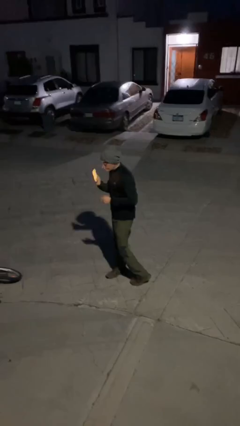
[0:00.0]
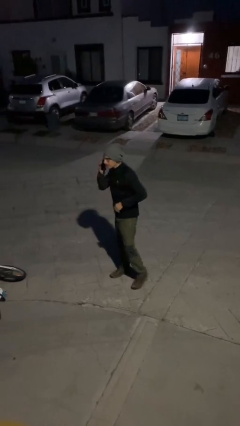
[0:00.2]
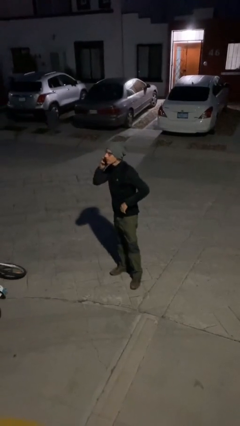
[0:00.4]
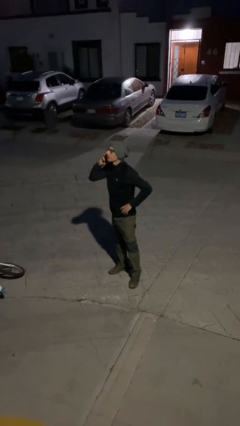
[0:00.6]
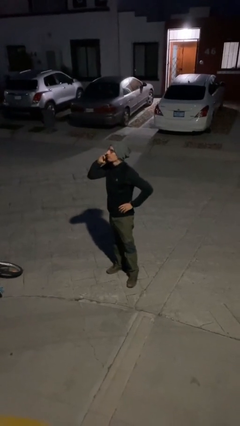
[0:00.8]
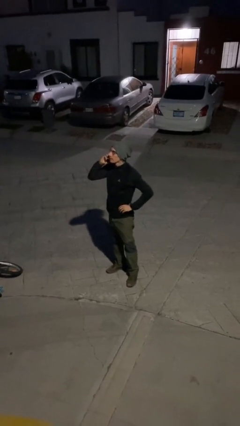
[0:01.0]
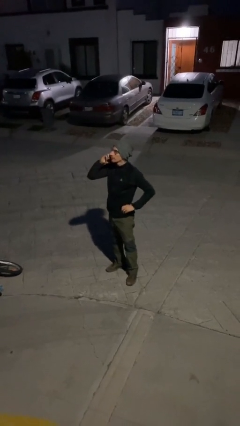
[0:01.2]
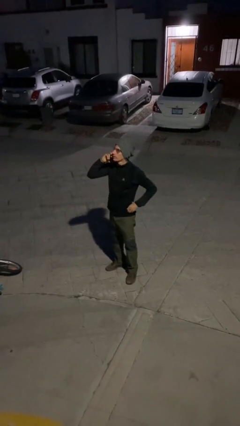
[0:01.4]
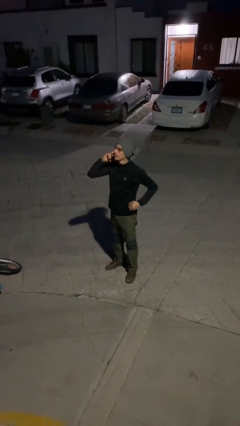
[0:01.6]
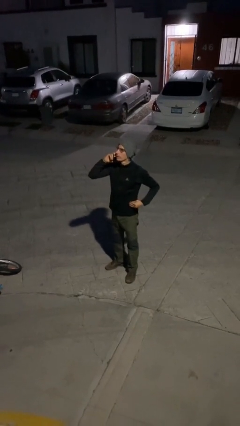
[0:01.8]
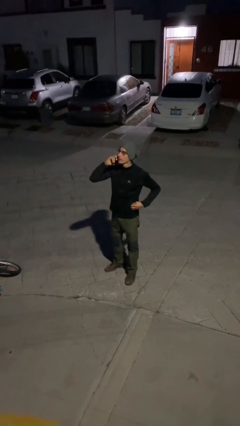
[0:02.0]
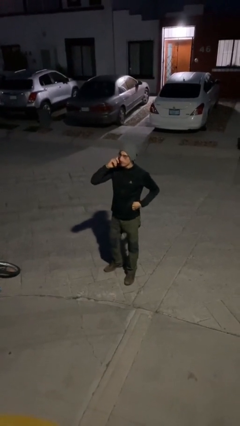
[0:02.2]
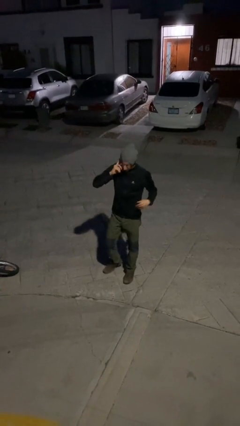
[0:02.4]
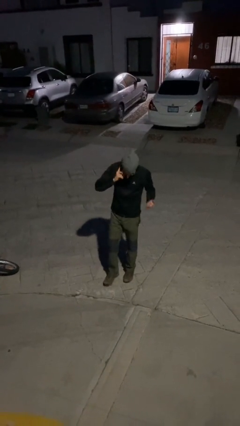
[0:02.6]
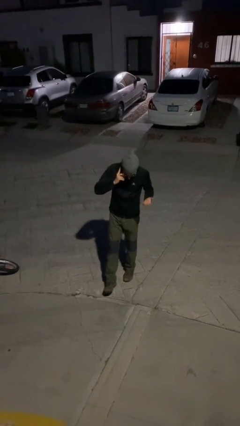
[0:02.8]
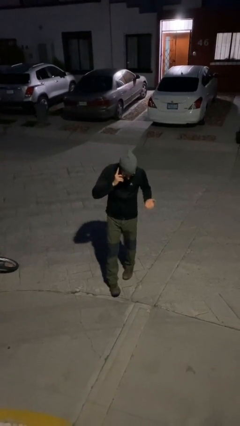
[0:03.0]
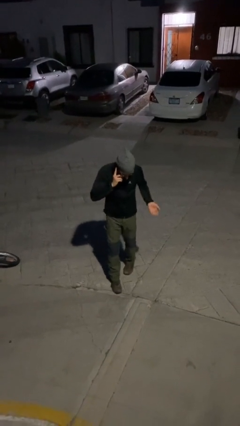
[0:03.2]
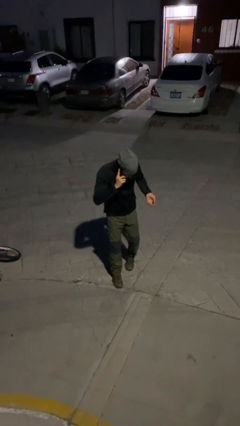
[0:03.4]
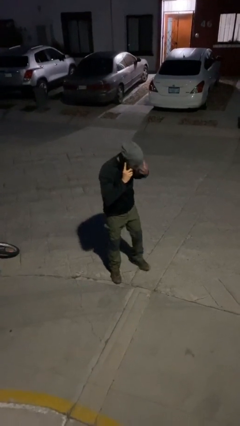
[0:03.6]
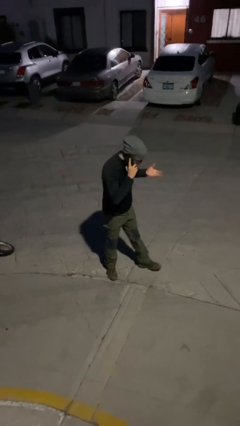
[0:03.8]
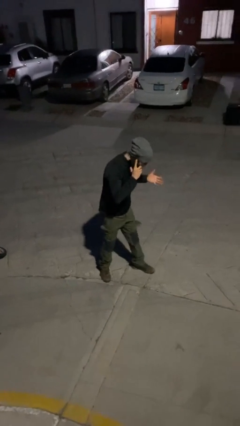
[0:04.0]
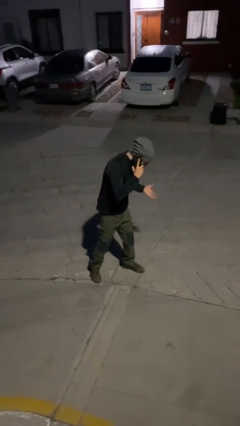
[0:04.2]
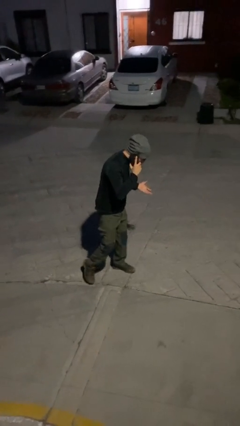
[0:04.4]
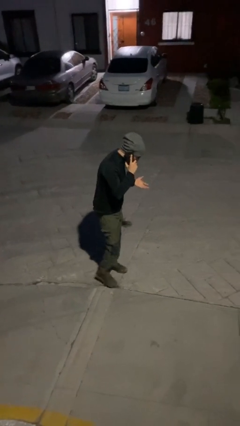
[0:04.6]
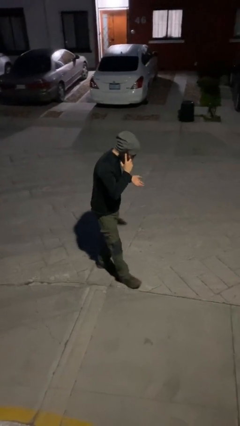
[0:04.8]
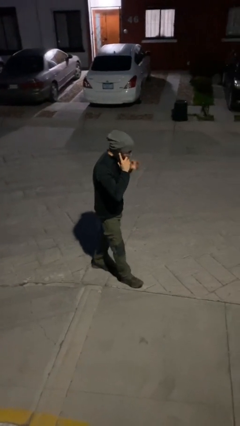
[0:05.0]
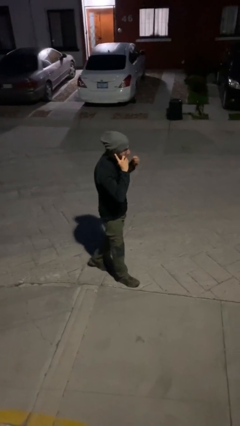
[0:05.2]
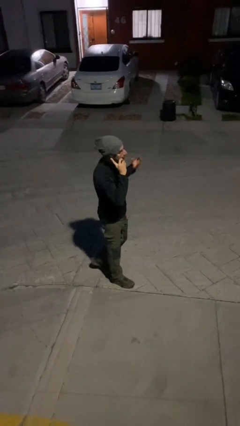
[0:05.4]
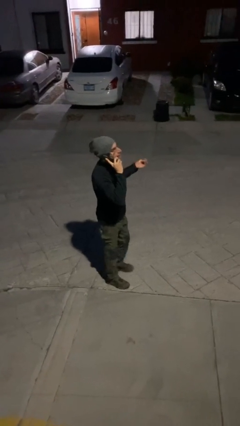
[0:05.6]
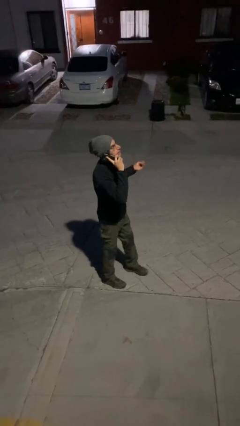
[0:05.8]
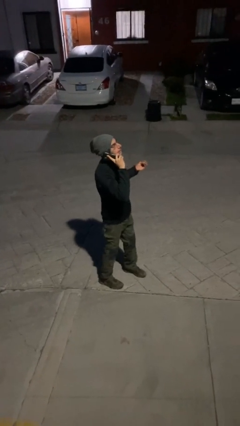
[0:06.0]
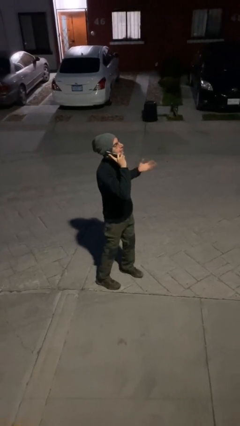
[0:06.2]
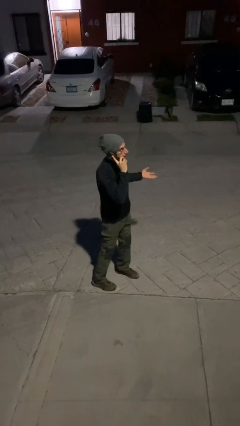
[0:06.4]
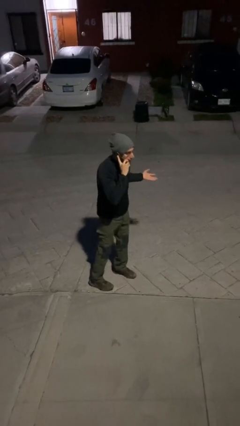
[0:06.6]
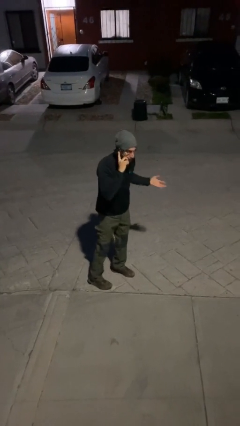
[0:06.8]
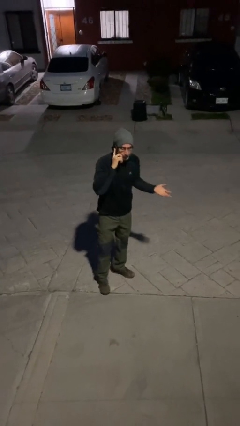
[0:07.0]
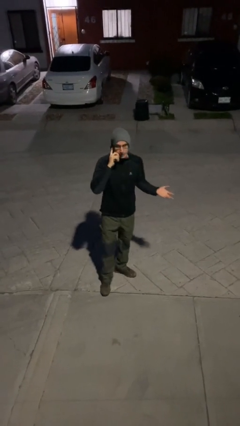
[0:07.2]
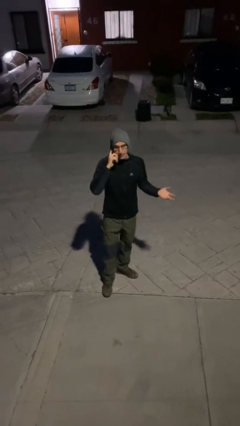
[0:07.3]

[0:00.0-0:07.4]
person talks on phone

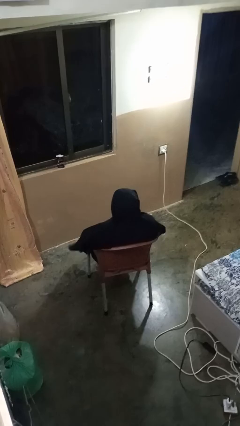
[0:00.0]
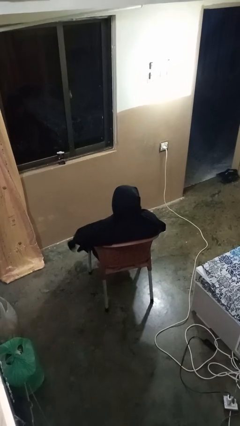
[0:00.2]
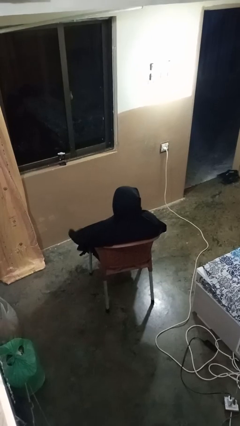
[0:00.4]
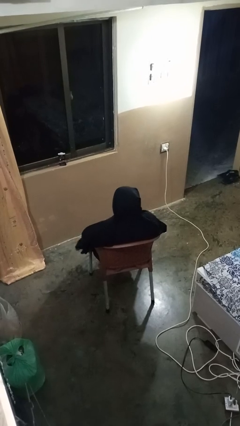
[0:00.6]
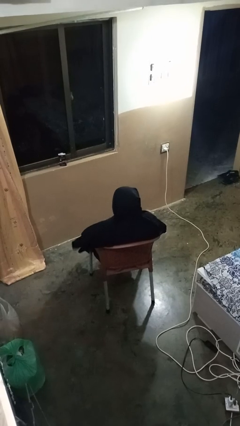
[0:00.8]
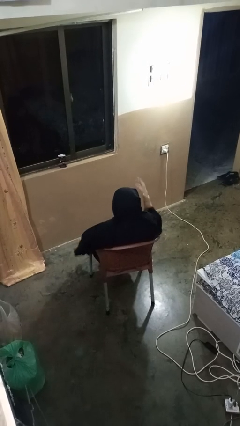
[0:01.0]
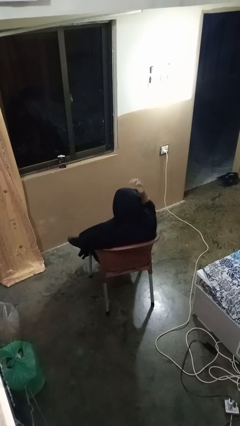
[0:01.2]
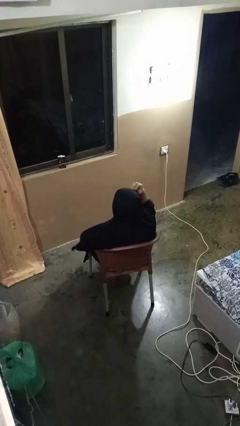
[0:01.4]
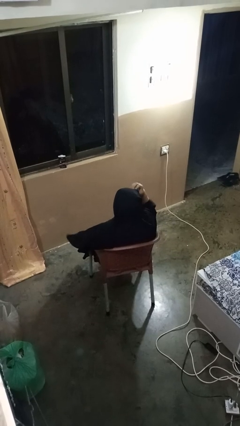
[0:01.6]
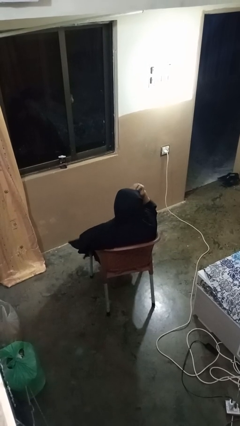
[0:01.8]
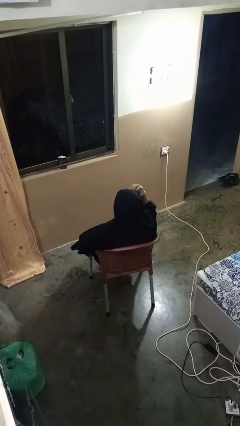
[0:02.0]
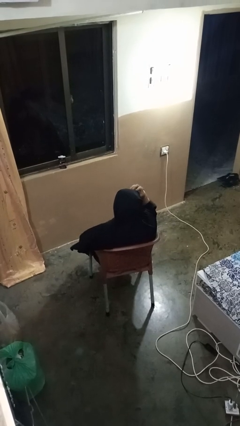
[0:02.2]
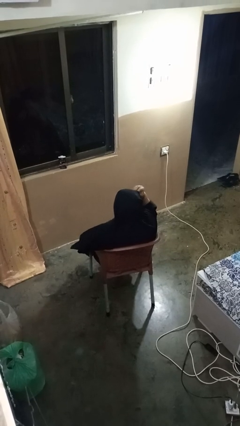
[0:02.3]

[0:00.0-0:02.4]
person scratches face

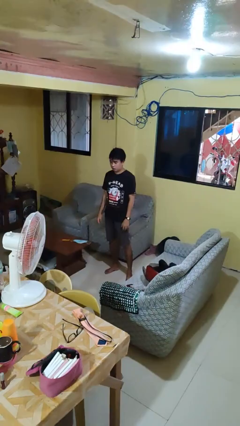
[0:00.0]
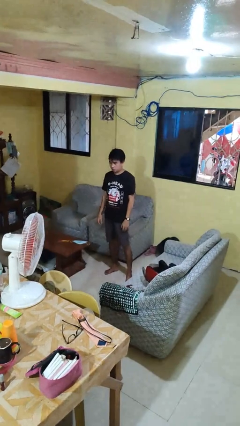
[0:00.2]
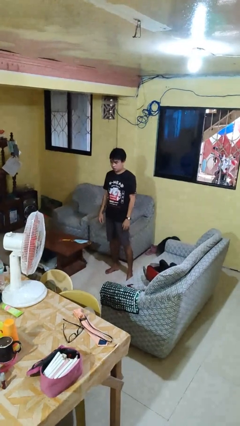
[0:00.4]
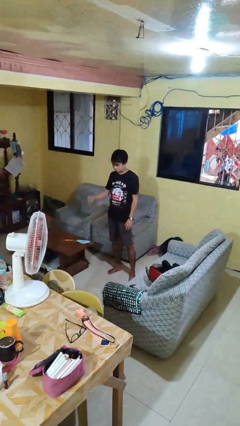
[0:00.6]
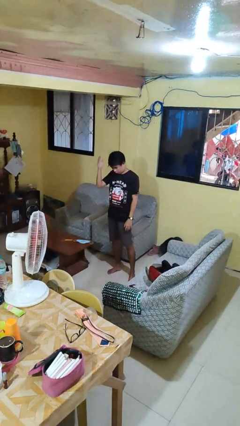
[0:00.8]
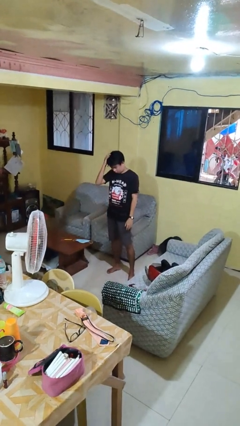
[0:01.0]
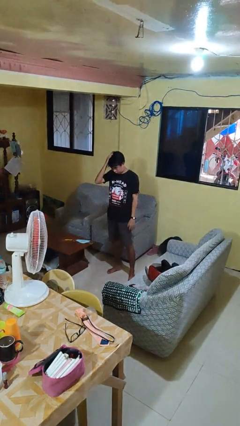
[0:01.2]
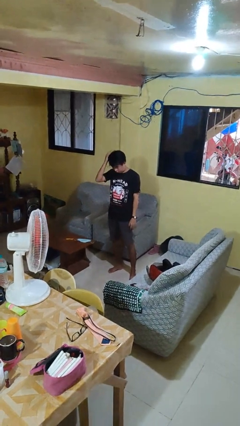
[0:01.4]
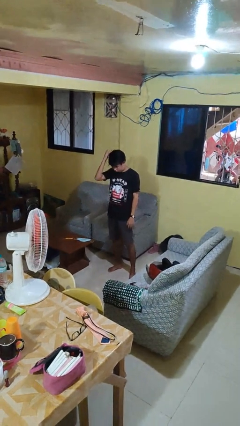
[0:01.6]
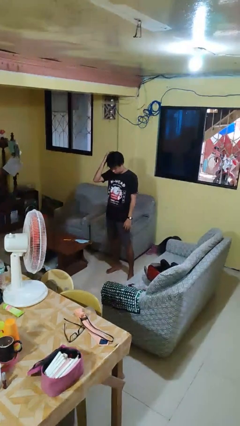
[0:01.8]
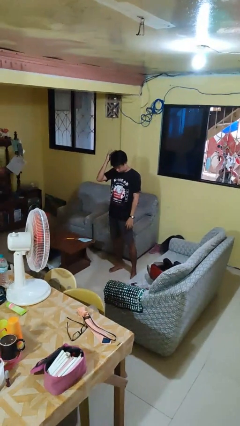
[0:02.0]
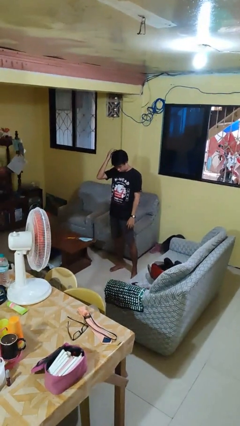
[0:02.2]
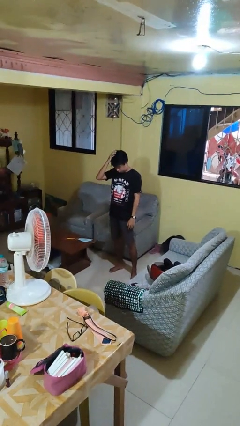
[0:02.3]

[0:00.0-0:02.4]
person pats head

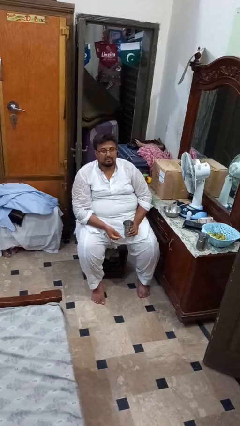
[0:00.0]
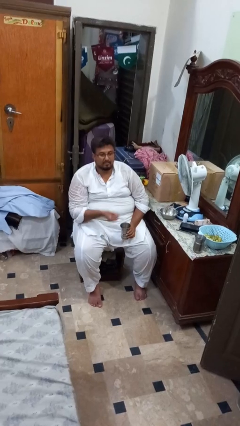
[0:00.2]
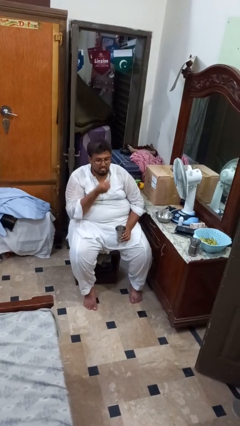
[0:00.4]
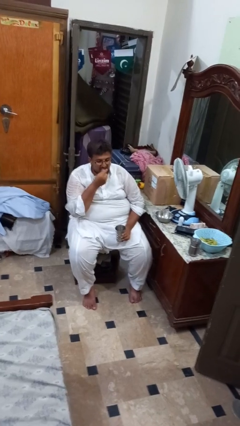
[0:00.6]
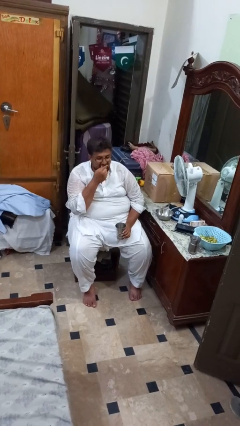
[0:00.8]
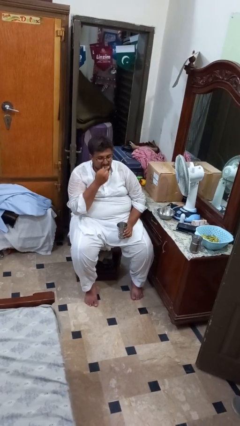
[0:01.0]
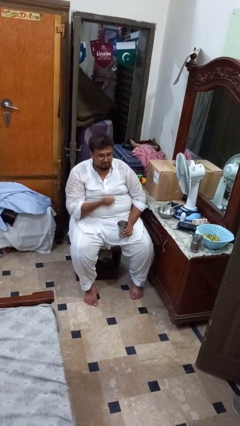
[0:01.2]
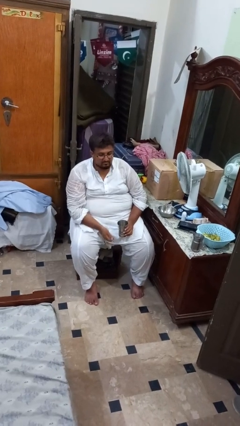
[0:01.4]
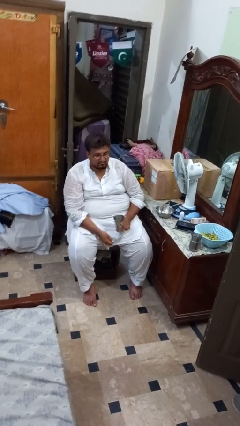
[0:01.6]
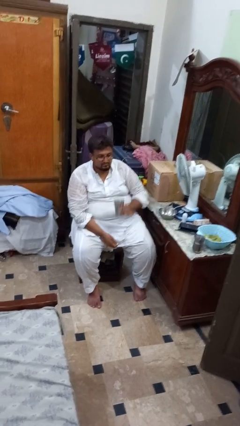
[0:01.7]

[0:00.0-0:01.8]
person takes medicine pills

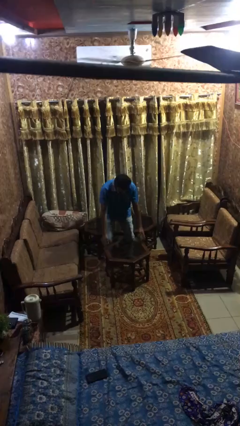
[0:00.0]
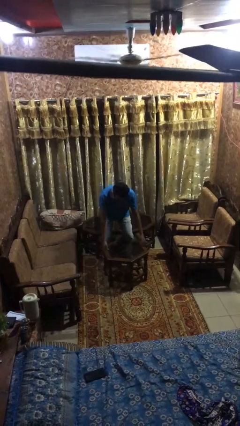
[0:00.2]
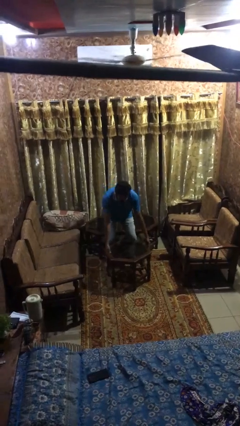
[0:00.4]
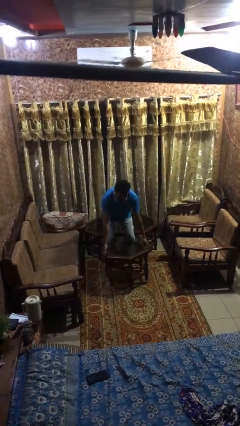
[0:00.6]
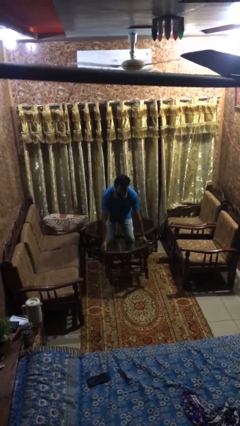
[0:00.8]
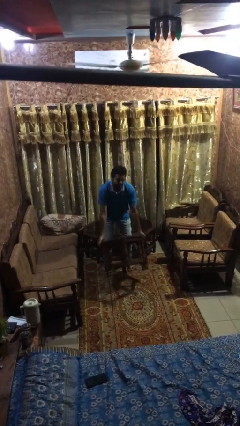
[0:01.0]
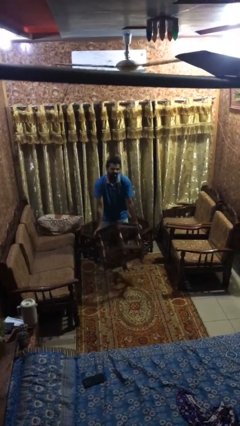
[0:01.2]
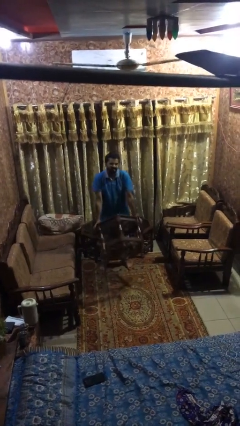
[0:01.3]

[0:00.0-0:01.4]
person picks up object from floor

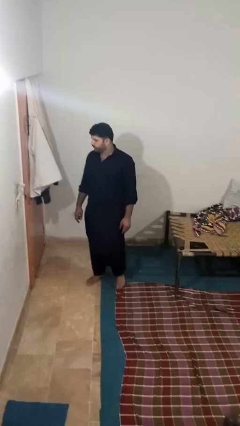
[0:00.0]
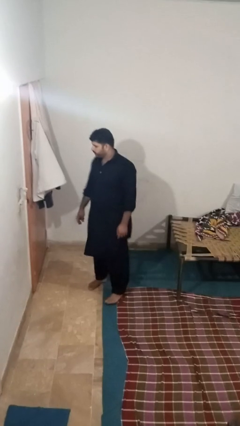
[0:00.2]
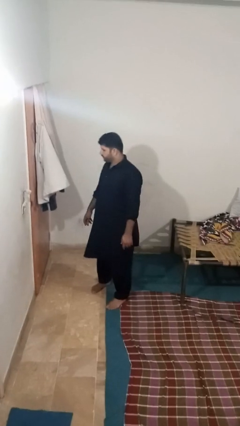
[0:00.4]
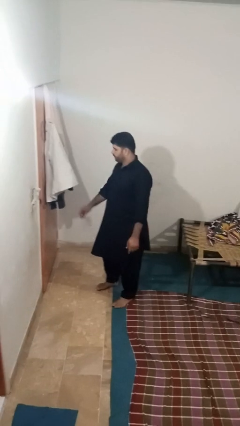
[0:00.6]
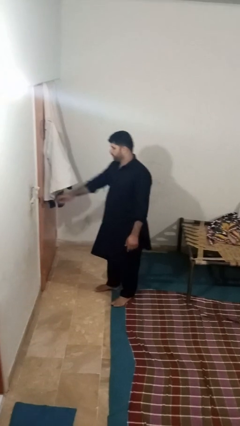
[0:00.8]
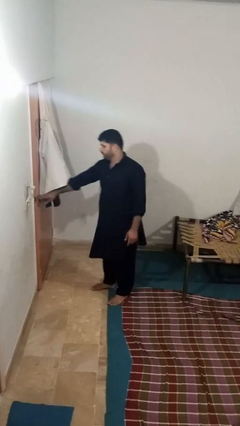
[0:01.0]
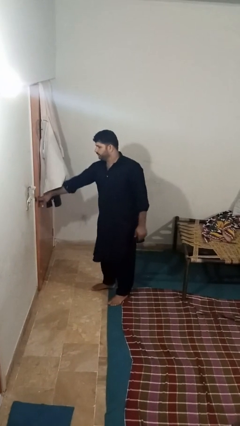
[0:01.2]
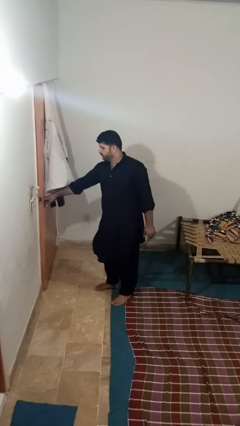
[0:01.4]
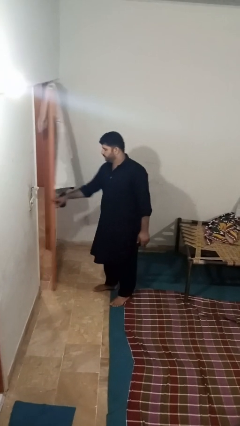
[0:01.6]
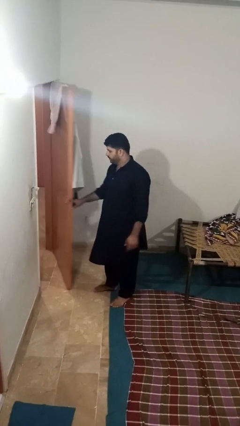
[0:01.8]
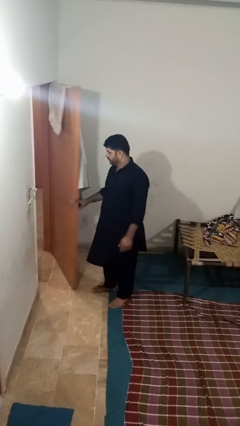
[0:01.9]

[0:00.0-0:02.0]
person opens gate

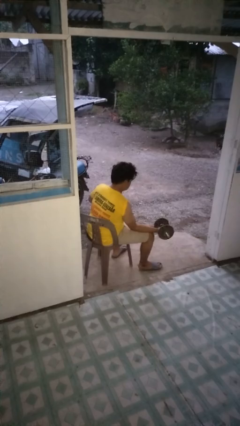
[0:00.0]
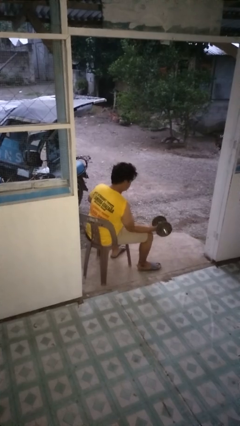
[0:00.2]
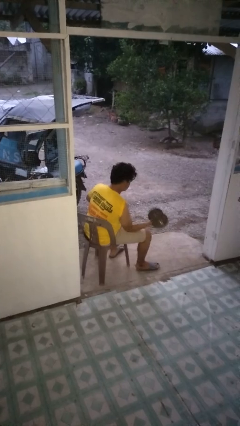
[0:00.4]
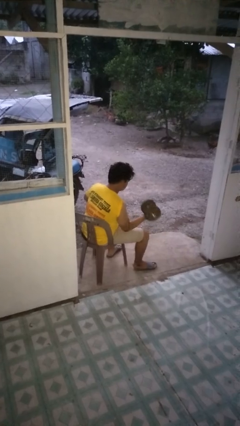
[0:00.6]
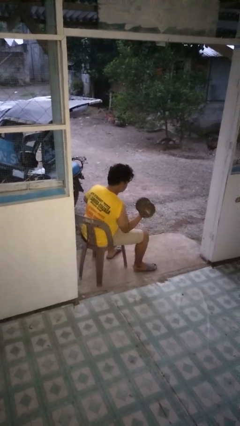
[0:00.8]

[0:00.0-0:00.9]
person lifts dumbbells
